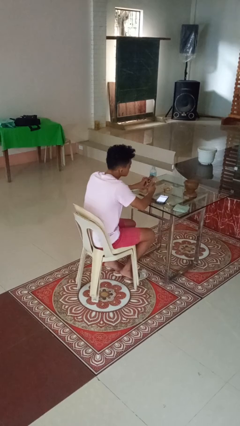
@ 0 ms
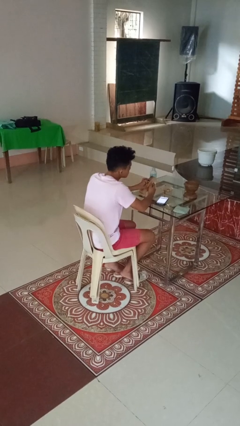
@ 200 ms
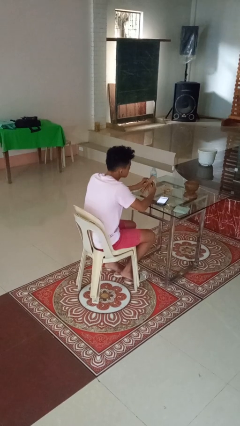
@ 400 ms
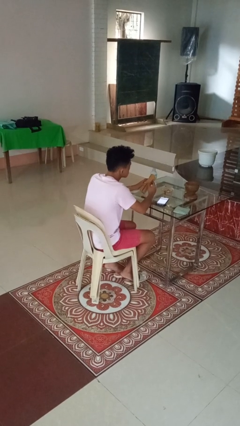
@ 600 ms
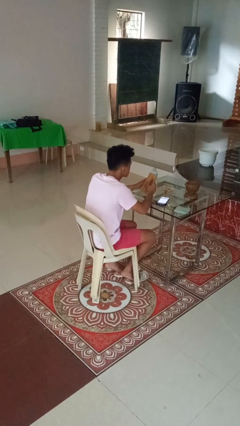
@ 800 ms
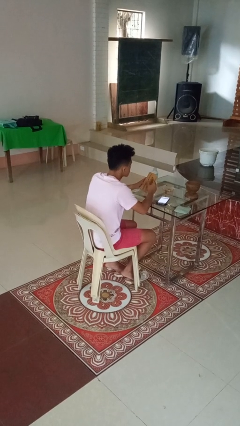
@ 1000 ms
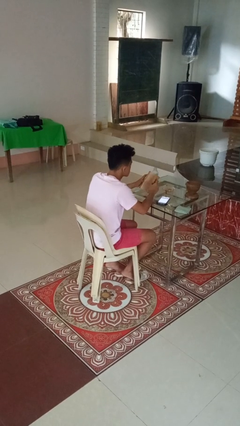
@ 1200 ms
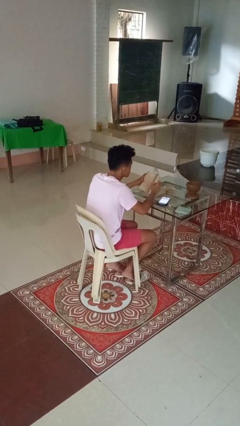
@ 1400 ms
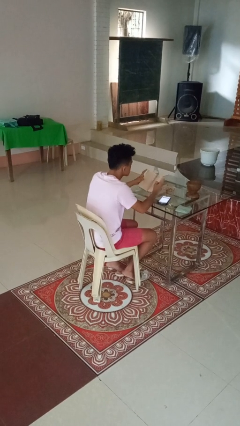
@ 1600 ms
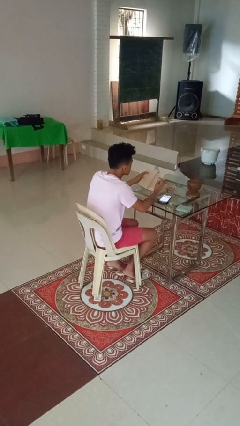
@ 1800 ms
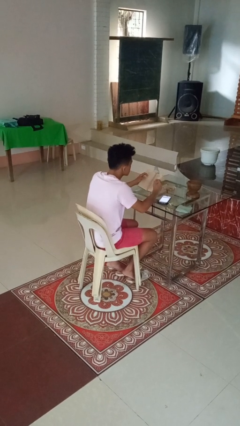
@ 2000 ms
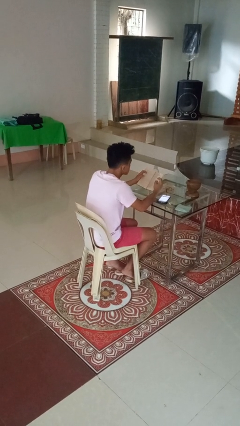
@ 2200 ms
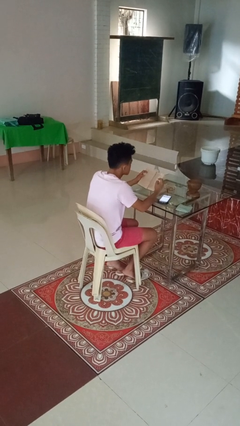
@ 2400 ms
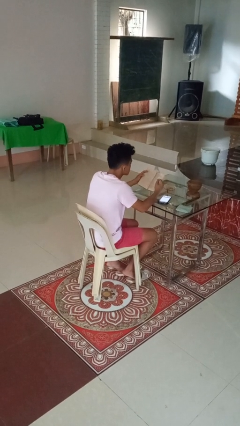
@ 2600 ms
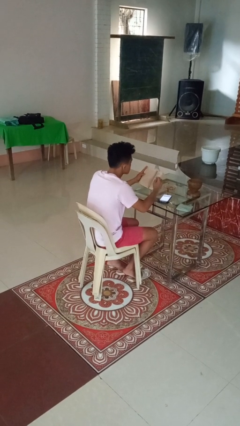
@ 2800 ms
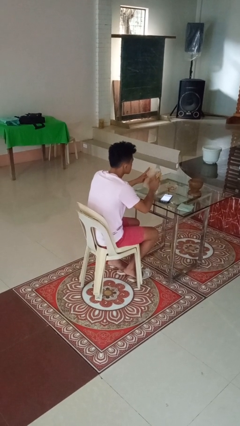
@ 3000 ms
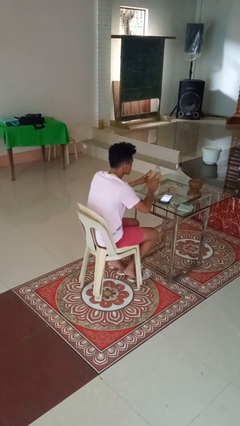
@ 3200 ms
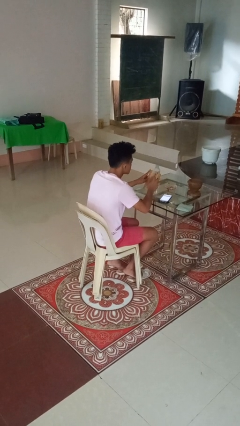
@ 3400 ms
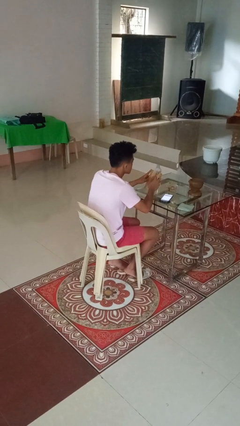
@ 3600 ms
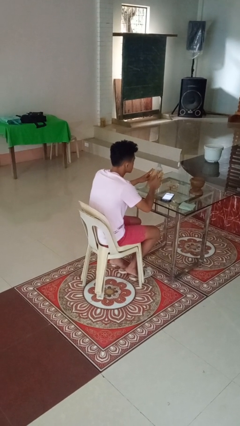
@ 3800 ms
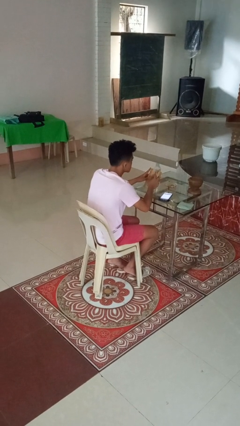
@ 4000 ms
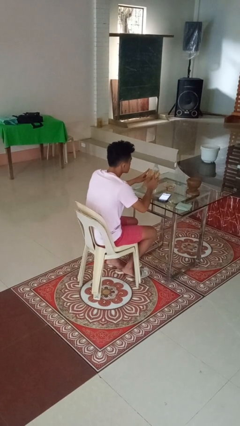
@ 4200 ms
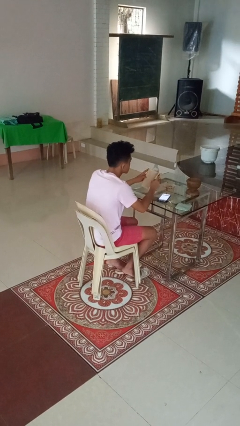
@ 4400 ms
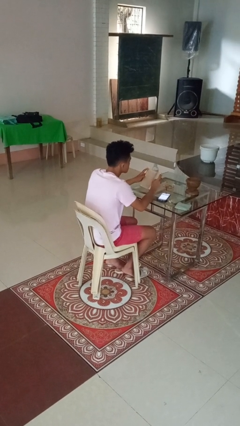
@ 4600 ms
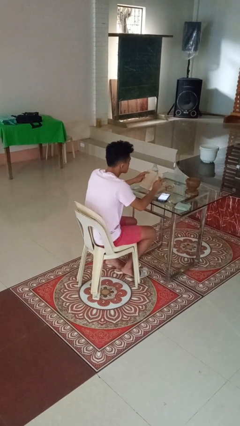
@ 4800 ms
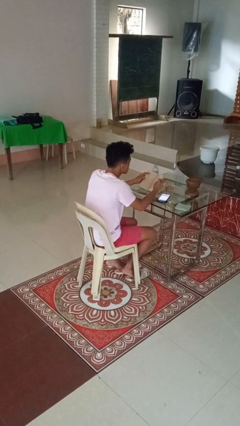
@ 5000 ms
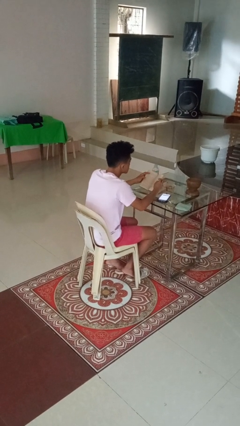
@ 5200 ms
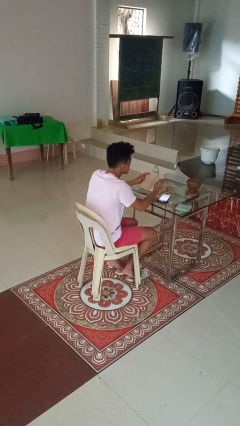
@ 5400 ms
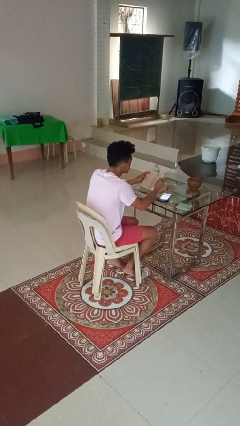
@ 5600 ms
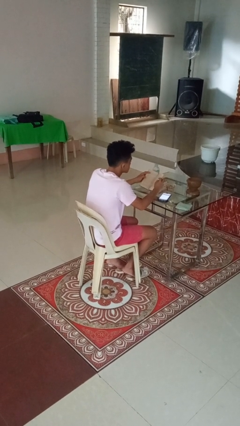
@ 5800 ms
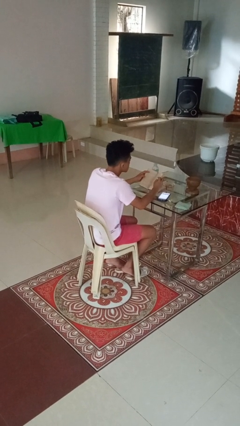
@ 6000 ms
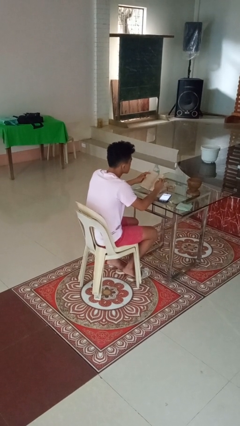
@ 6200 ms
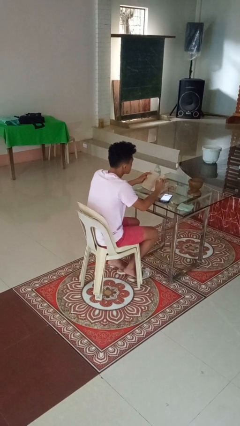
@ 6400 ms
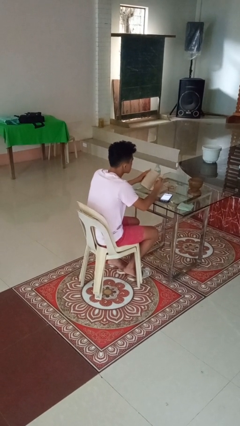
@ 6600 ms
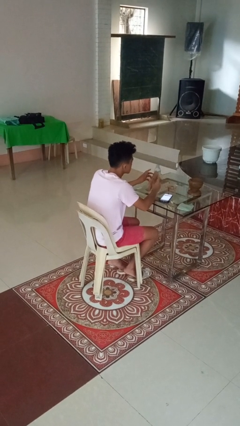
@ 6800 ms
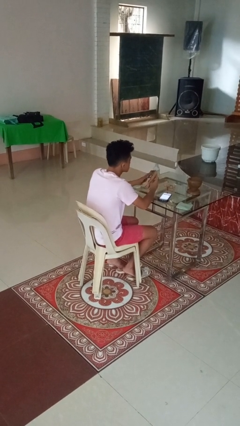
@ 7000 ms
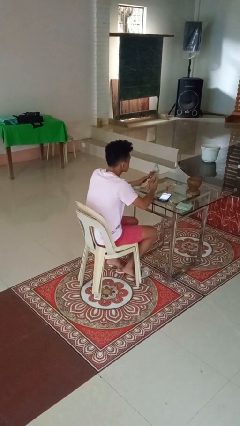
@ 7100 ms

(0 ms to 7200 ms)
person reads book

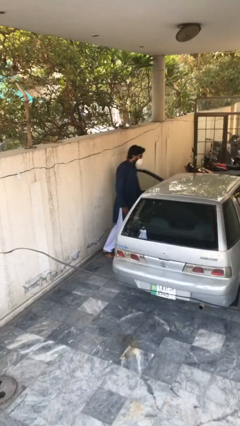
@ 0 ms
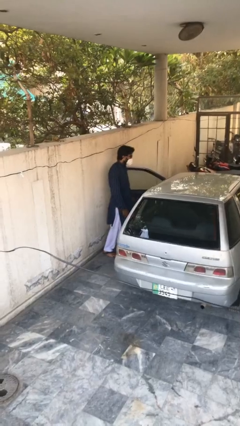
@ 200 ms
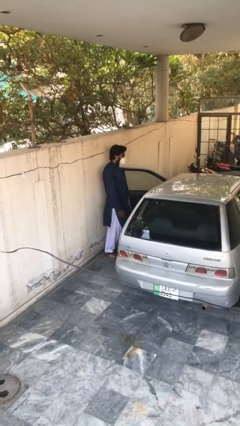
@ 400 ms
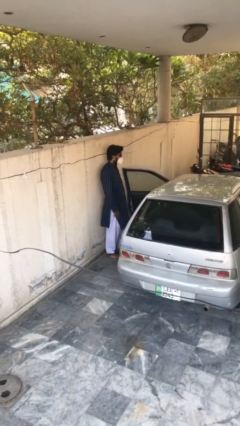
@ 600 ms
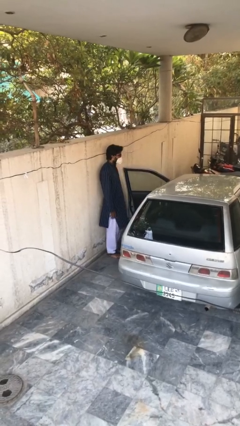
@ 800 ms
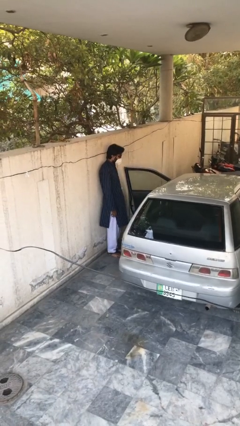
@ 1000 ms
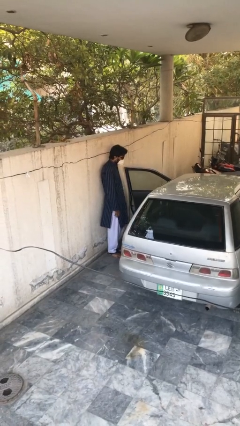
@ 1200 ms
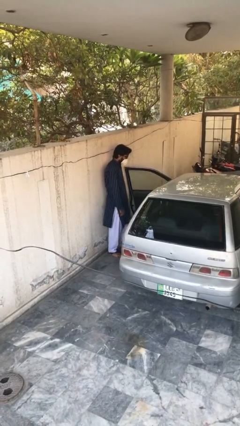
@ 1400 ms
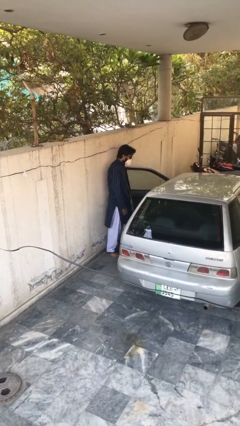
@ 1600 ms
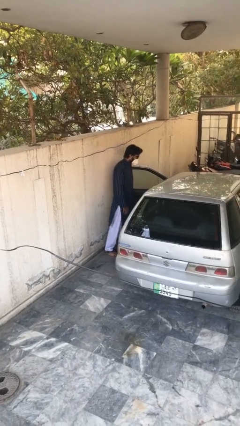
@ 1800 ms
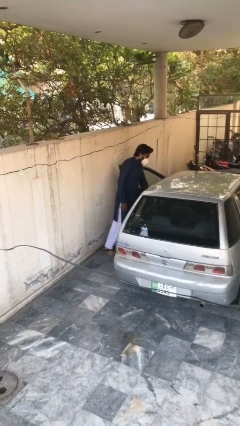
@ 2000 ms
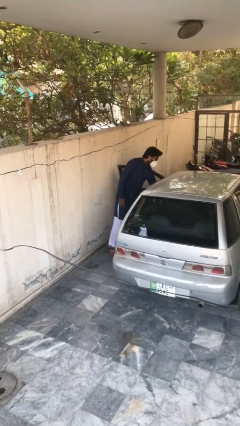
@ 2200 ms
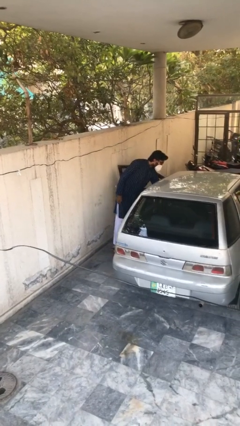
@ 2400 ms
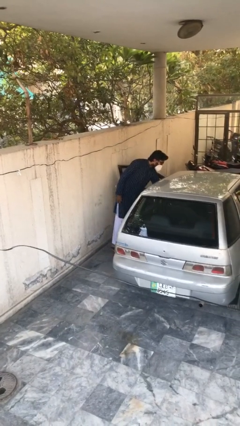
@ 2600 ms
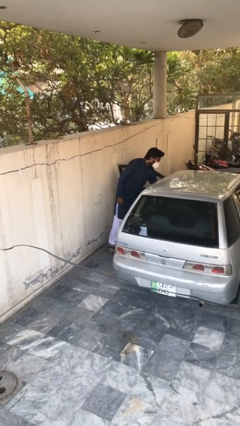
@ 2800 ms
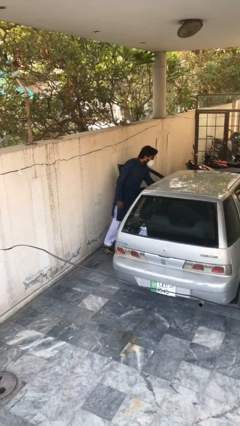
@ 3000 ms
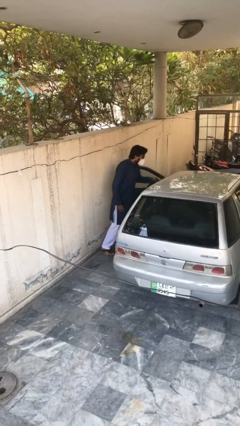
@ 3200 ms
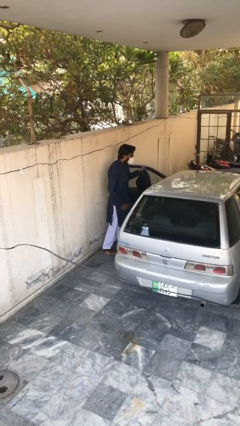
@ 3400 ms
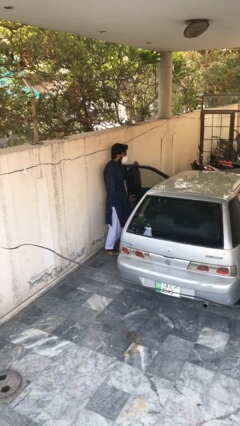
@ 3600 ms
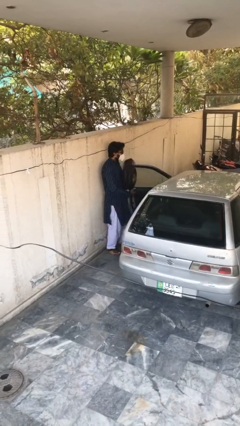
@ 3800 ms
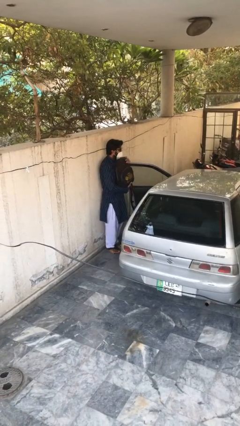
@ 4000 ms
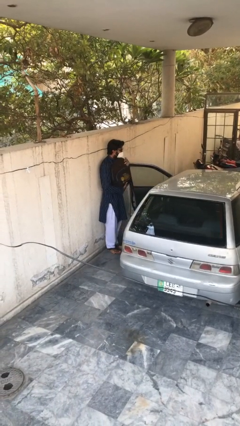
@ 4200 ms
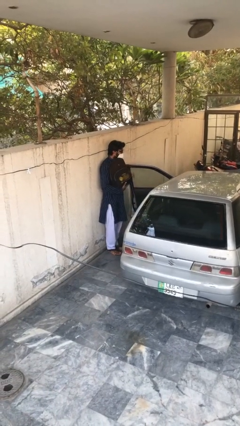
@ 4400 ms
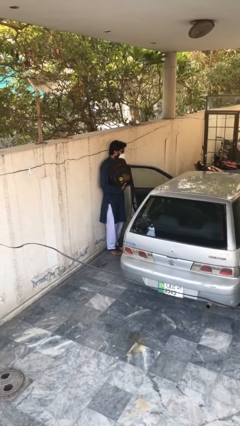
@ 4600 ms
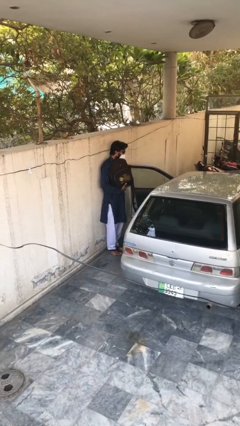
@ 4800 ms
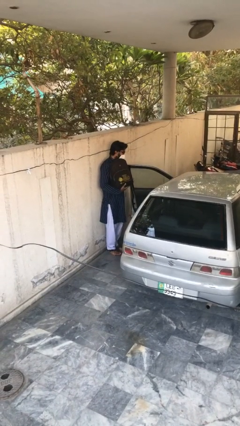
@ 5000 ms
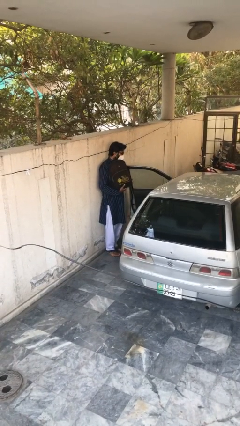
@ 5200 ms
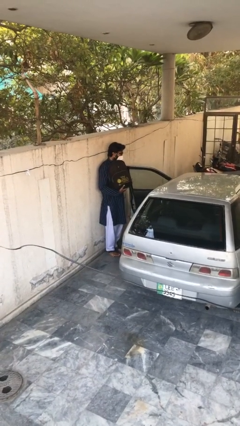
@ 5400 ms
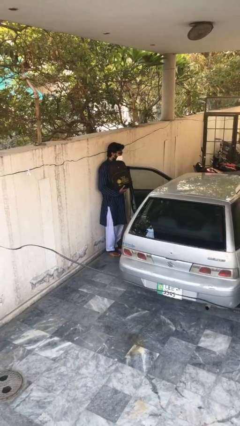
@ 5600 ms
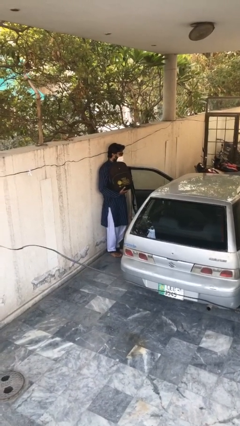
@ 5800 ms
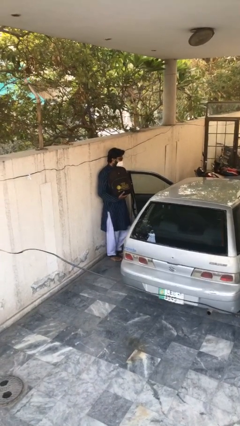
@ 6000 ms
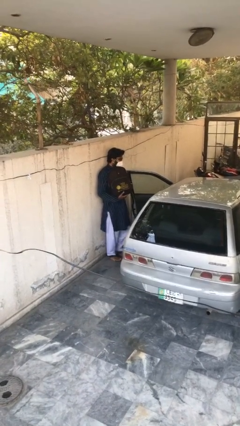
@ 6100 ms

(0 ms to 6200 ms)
person unloads car

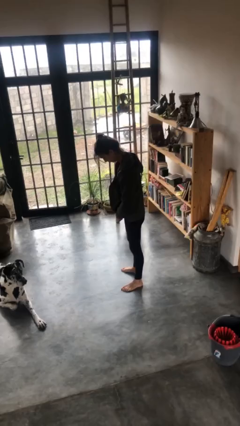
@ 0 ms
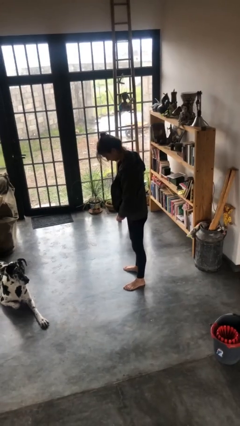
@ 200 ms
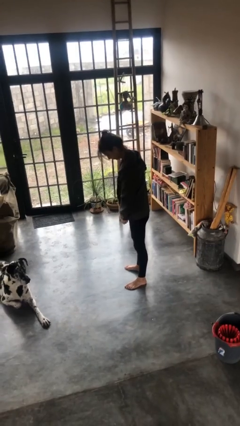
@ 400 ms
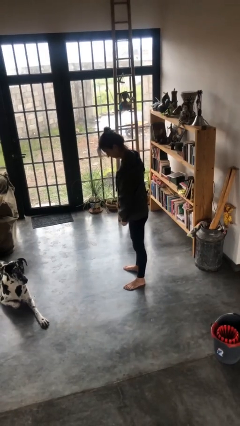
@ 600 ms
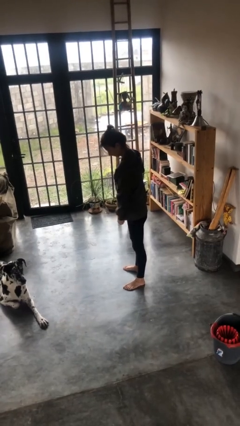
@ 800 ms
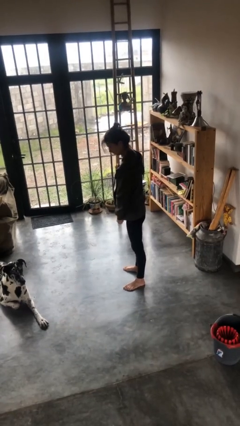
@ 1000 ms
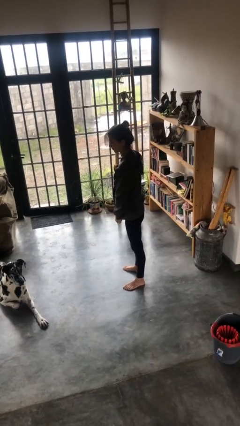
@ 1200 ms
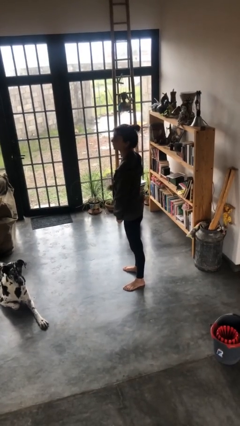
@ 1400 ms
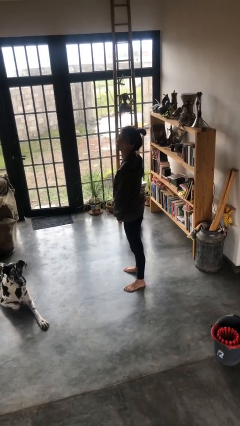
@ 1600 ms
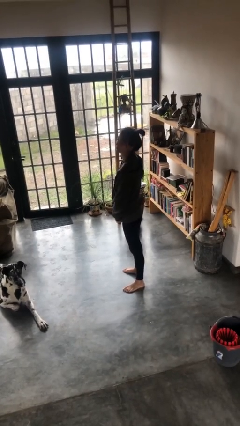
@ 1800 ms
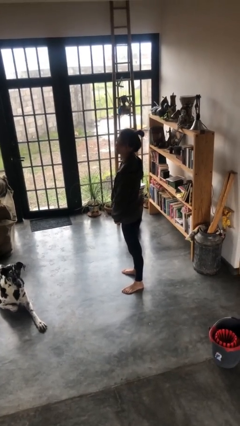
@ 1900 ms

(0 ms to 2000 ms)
person zips up jacket

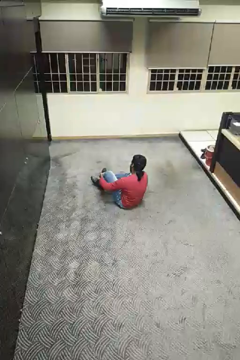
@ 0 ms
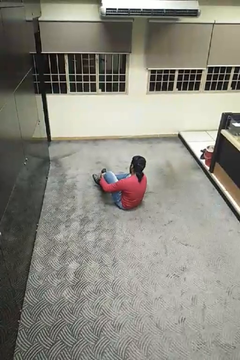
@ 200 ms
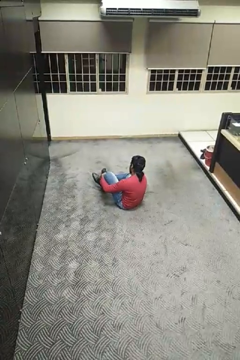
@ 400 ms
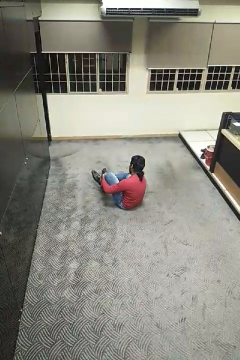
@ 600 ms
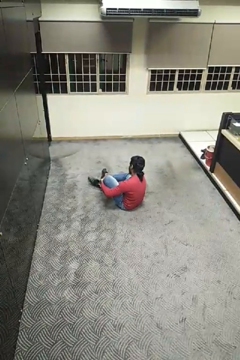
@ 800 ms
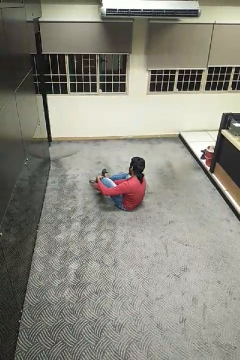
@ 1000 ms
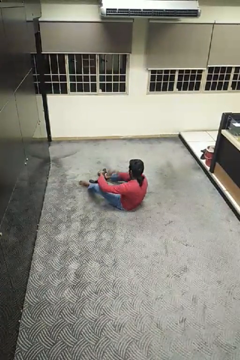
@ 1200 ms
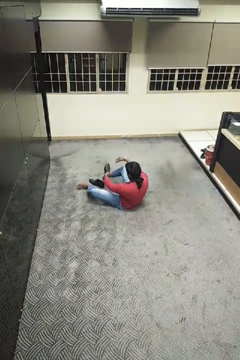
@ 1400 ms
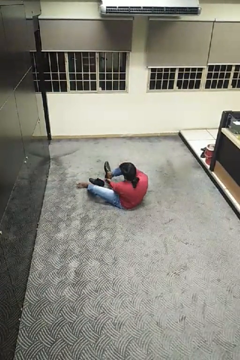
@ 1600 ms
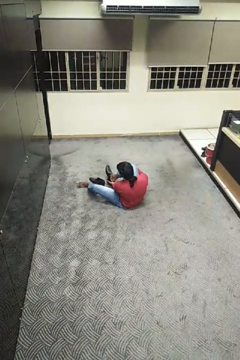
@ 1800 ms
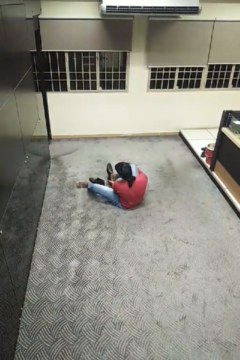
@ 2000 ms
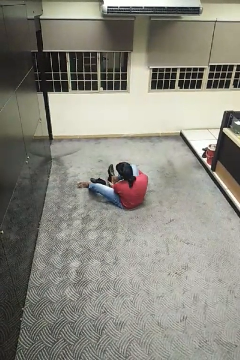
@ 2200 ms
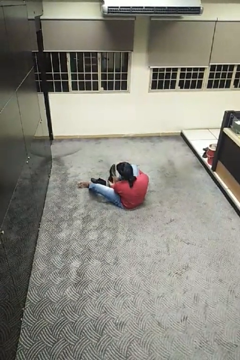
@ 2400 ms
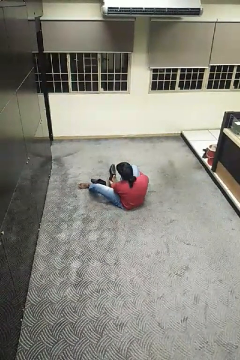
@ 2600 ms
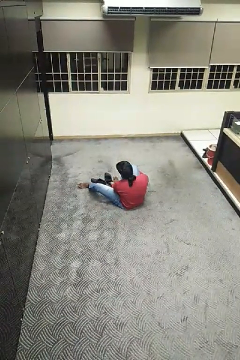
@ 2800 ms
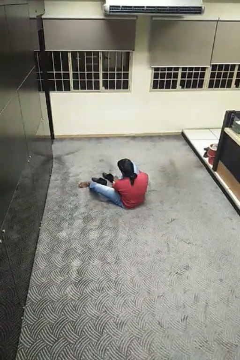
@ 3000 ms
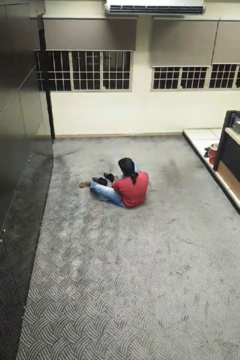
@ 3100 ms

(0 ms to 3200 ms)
person takes off shoes

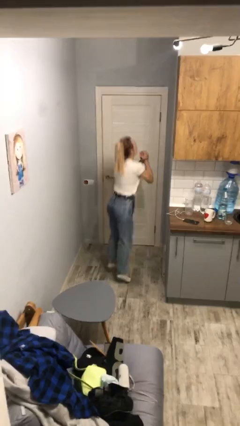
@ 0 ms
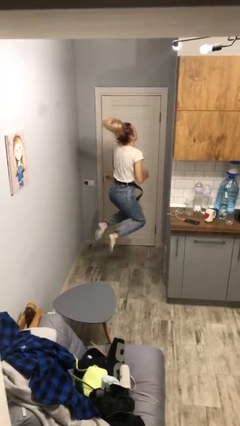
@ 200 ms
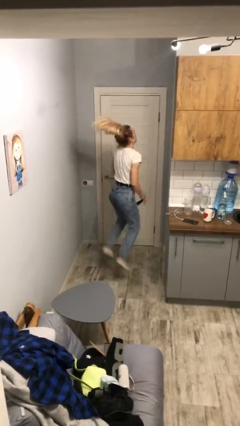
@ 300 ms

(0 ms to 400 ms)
person jumps
